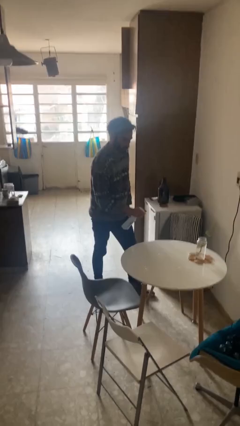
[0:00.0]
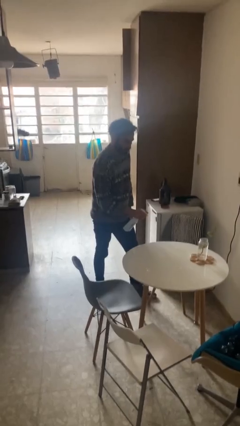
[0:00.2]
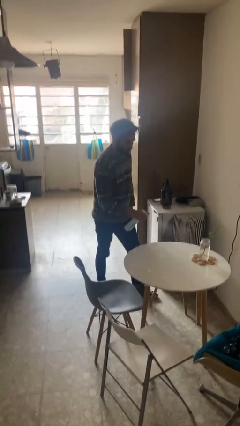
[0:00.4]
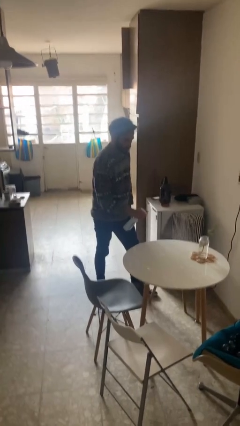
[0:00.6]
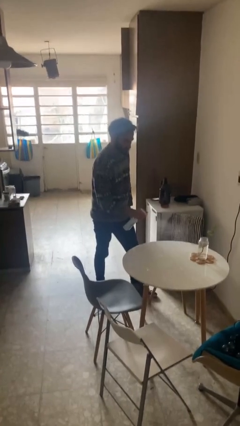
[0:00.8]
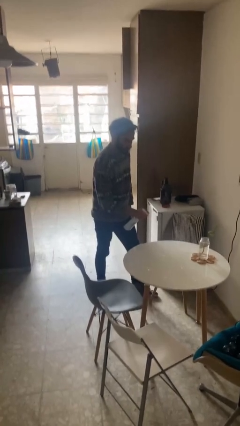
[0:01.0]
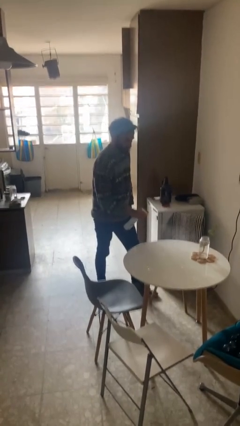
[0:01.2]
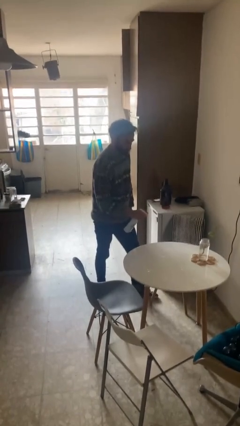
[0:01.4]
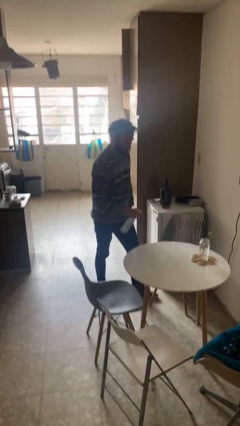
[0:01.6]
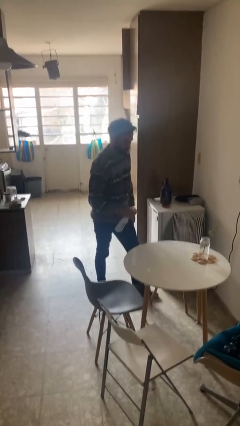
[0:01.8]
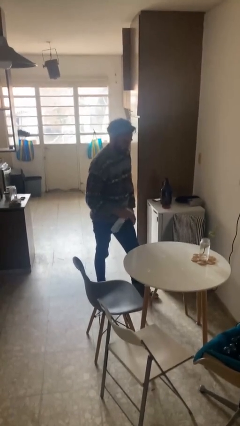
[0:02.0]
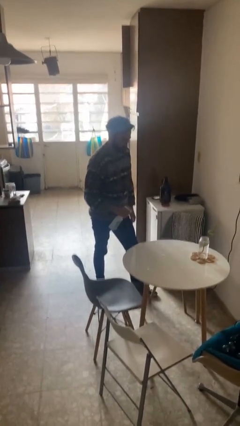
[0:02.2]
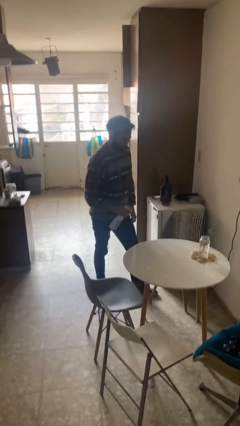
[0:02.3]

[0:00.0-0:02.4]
person sprays from bottle

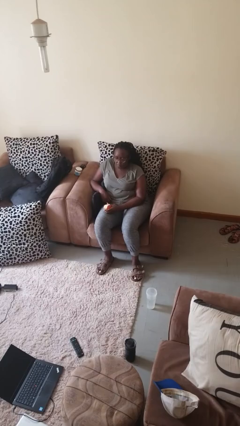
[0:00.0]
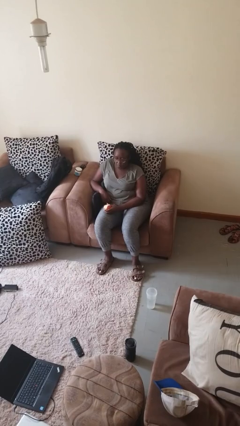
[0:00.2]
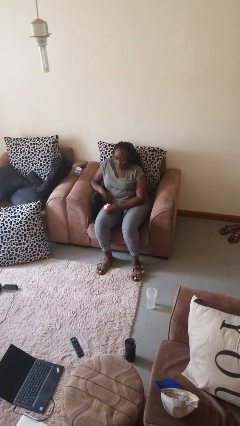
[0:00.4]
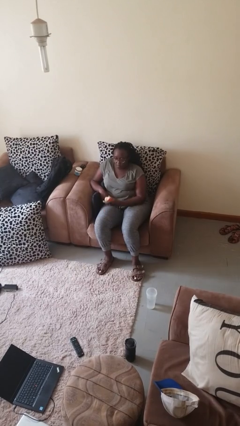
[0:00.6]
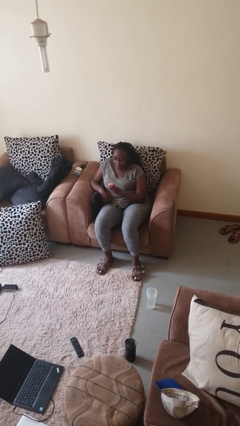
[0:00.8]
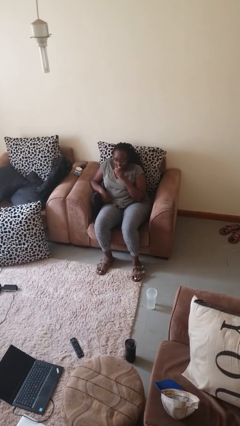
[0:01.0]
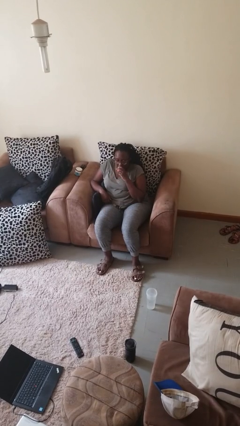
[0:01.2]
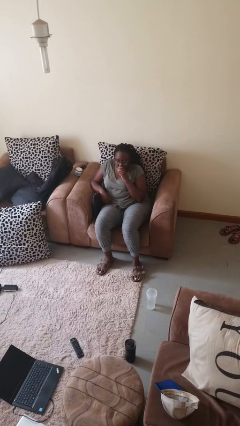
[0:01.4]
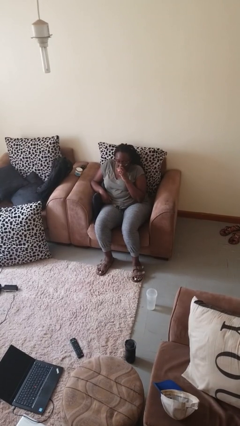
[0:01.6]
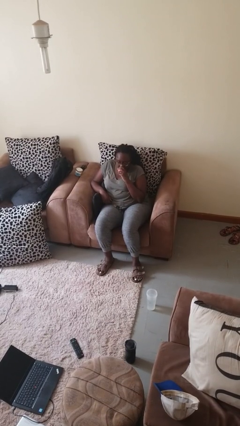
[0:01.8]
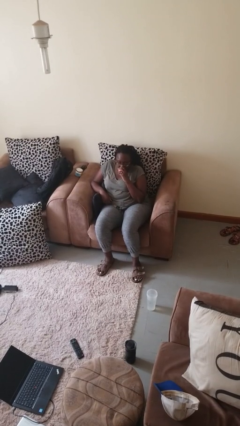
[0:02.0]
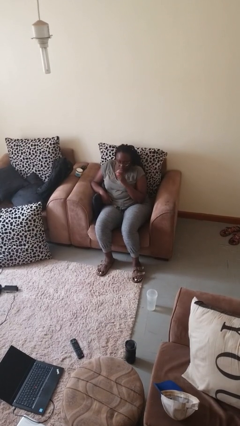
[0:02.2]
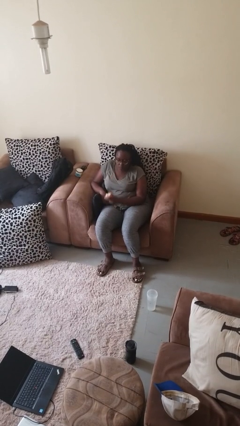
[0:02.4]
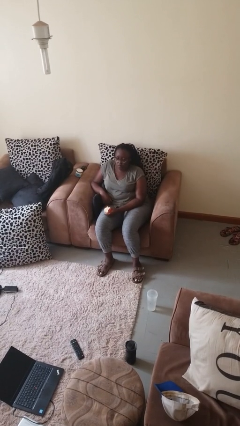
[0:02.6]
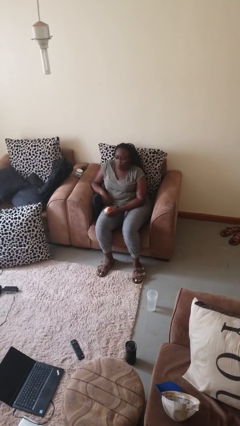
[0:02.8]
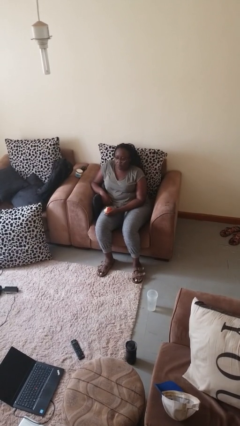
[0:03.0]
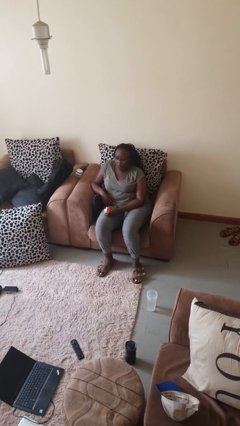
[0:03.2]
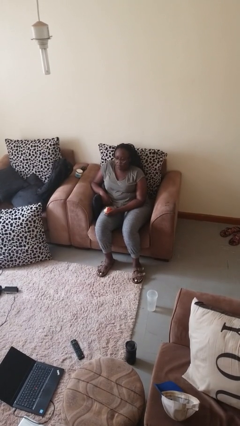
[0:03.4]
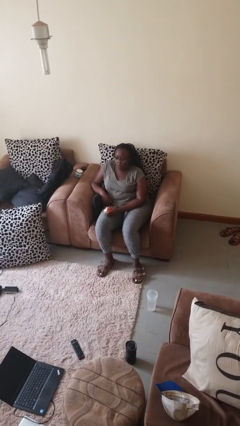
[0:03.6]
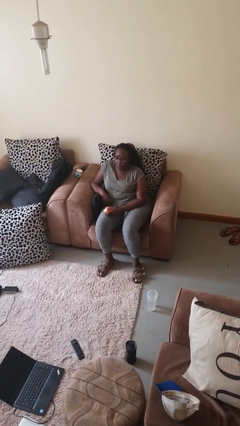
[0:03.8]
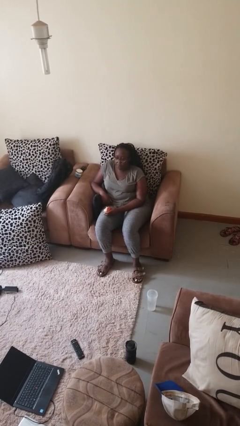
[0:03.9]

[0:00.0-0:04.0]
person eats apple

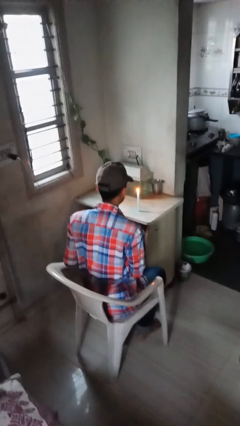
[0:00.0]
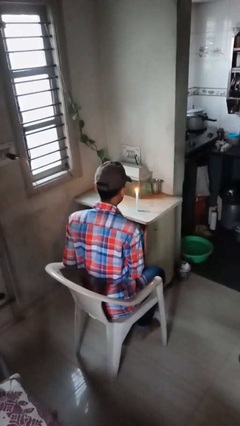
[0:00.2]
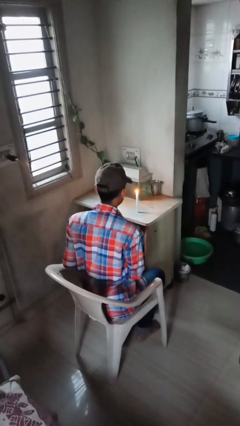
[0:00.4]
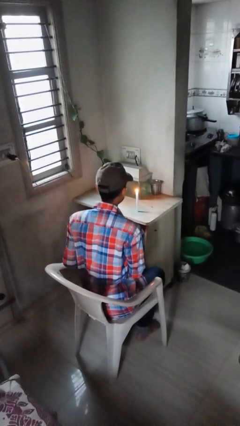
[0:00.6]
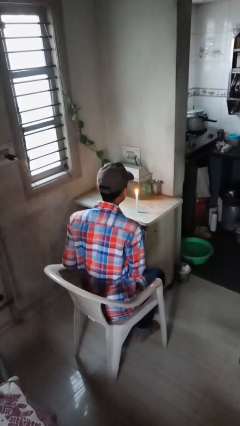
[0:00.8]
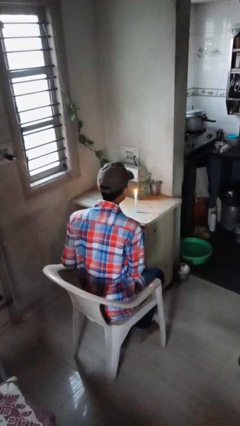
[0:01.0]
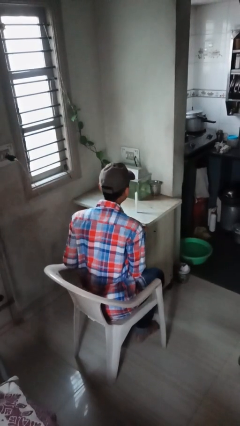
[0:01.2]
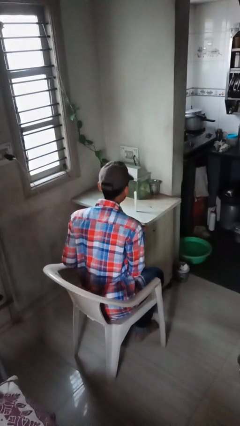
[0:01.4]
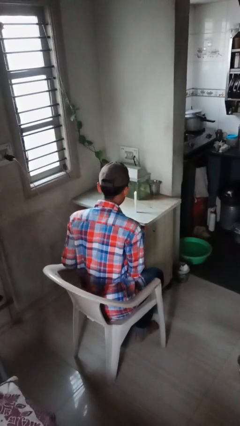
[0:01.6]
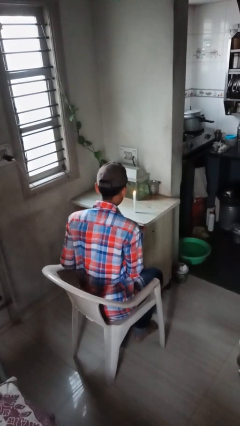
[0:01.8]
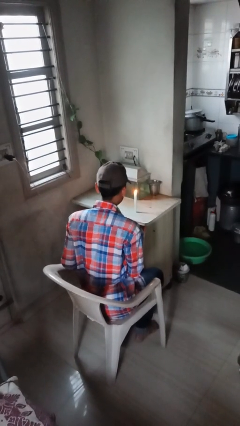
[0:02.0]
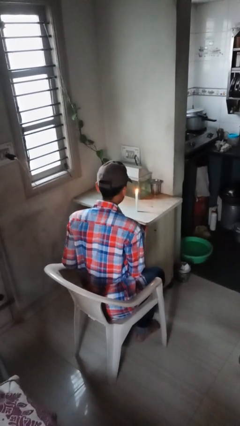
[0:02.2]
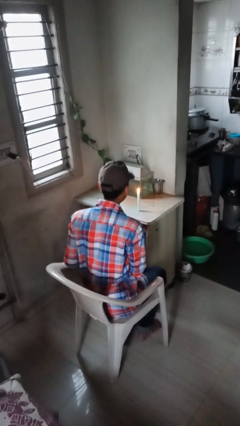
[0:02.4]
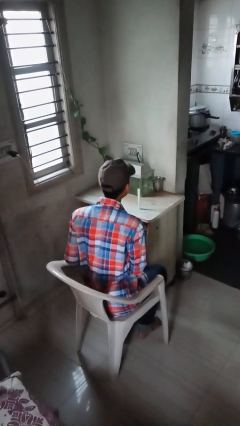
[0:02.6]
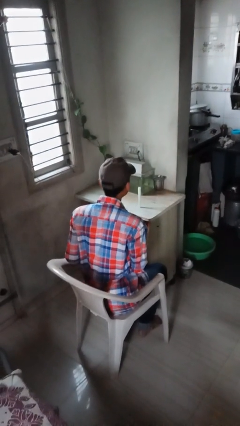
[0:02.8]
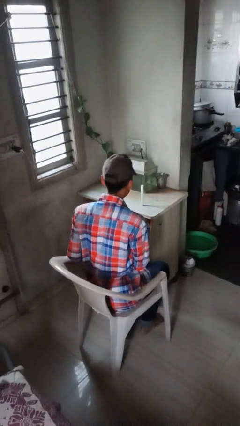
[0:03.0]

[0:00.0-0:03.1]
person extinguishes candle

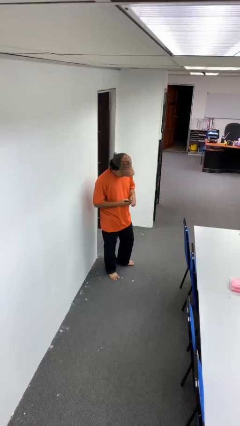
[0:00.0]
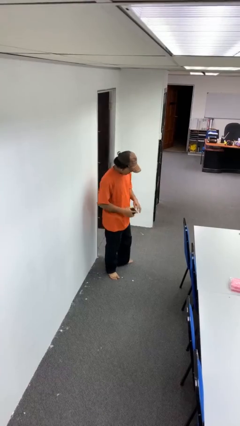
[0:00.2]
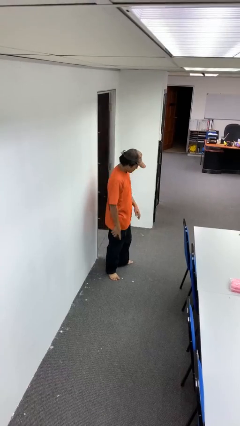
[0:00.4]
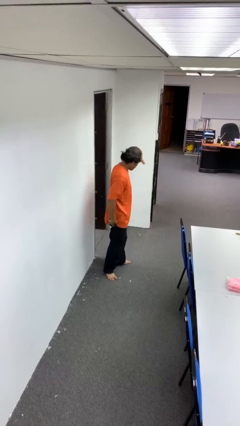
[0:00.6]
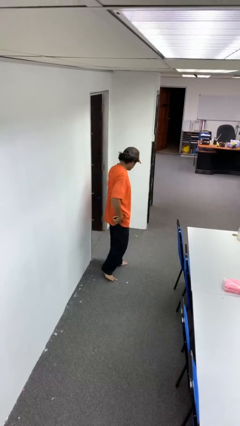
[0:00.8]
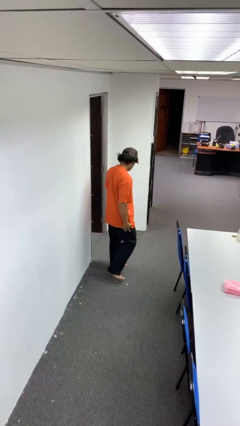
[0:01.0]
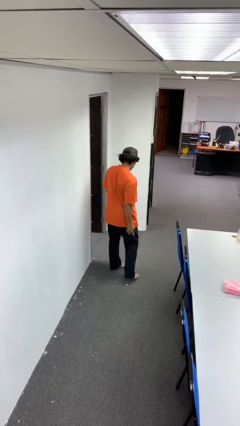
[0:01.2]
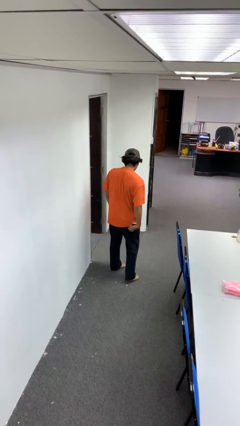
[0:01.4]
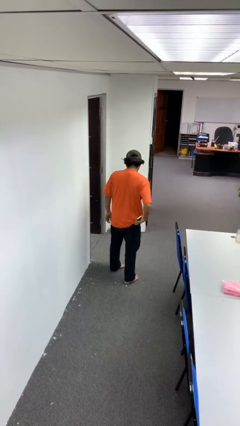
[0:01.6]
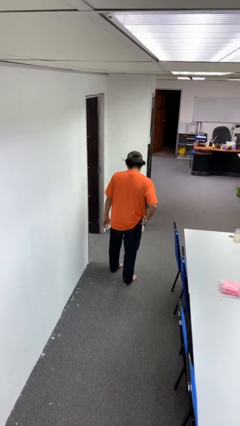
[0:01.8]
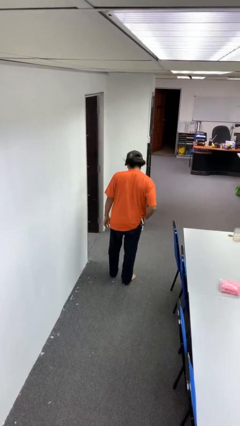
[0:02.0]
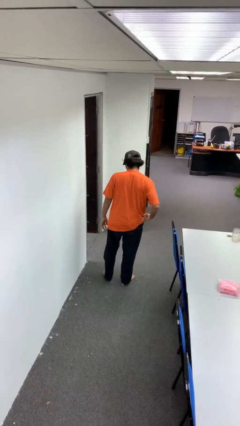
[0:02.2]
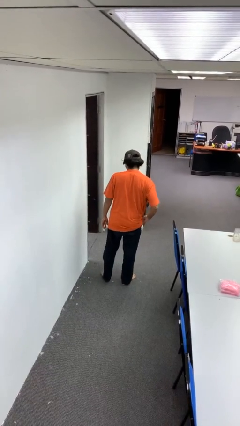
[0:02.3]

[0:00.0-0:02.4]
person puts phone into pocket

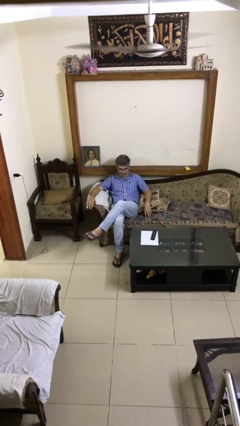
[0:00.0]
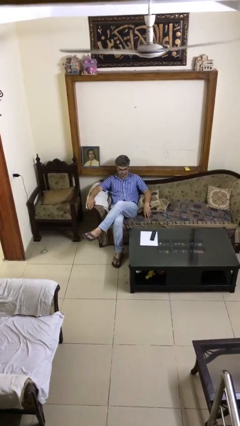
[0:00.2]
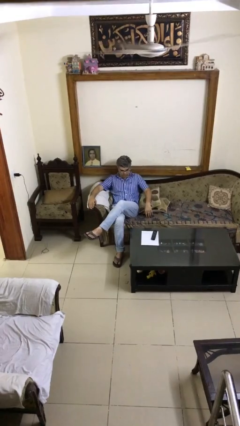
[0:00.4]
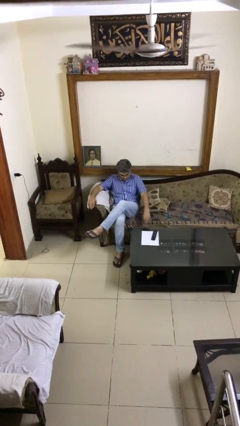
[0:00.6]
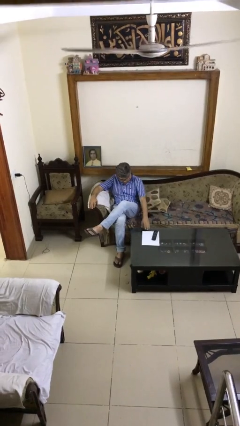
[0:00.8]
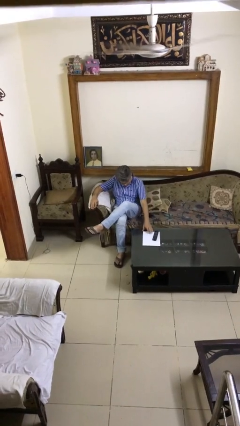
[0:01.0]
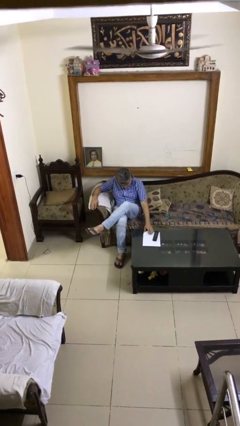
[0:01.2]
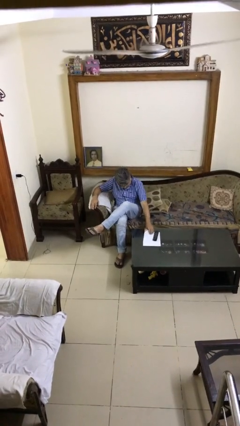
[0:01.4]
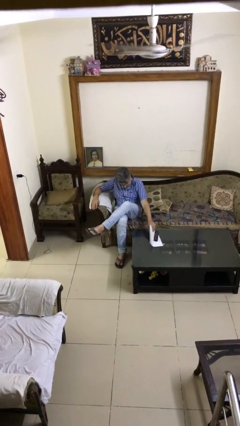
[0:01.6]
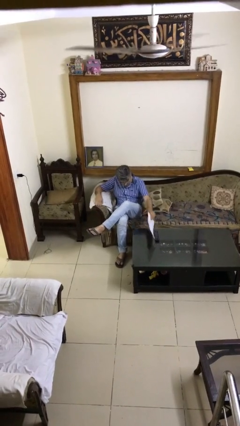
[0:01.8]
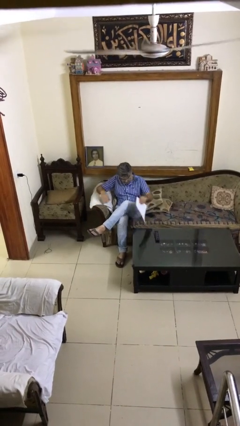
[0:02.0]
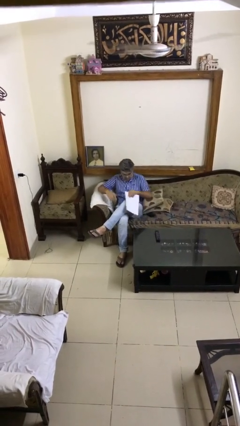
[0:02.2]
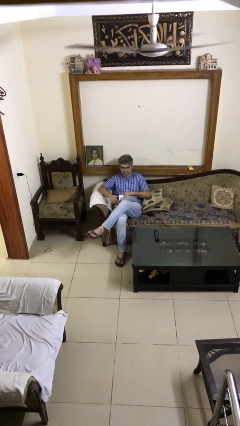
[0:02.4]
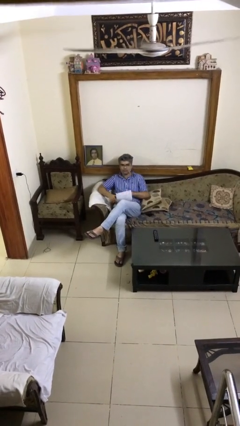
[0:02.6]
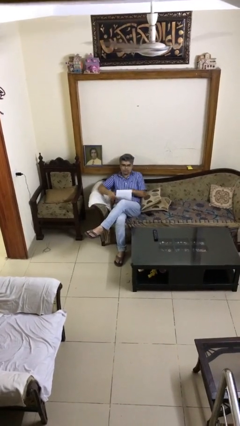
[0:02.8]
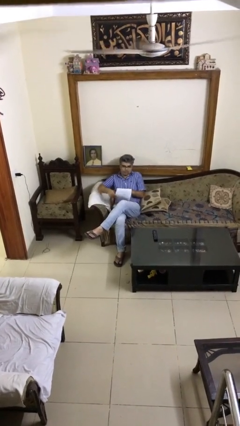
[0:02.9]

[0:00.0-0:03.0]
person picks up object from table

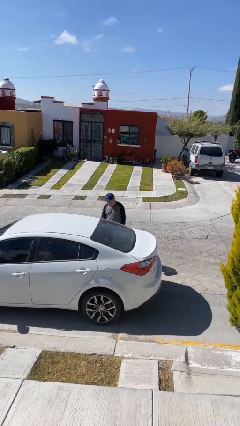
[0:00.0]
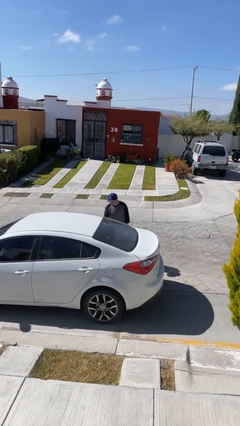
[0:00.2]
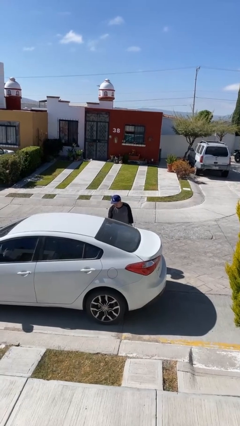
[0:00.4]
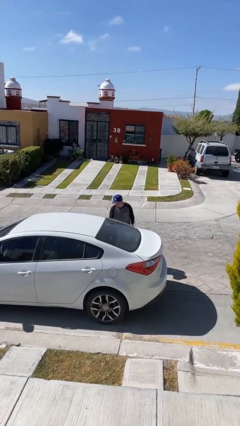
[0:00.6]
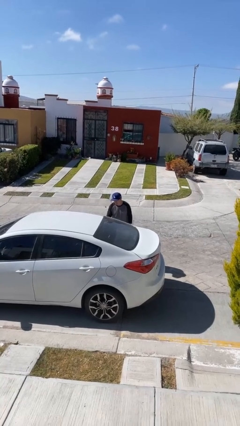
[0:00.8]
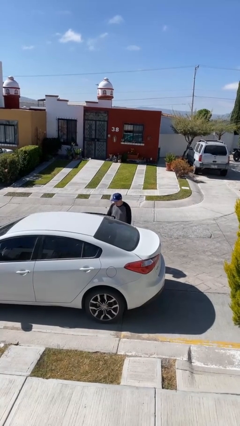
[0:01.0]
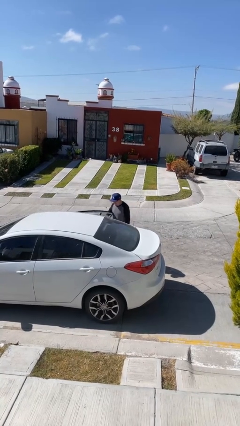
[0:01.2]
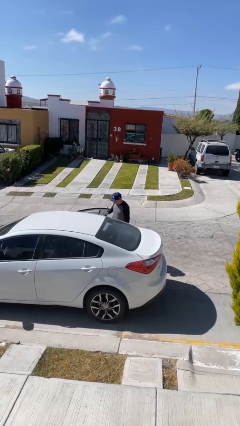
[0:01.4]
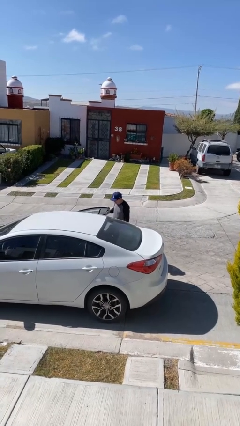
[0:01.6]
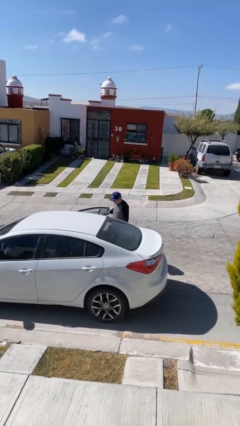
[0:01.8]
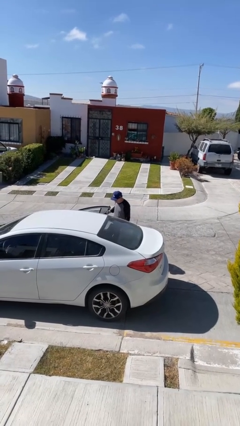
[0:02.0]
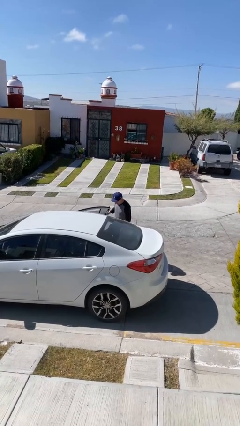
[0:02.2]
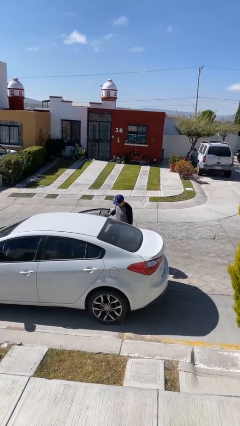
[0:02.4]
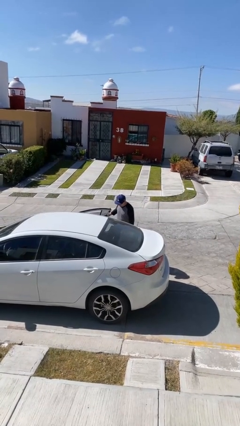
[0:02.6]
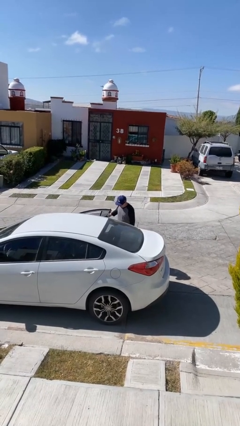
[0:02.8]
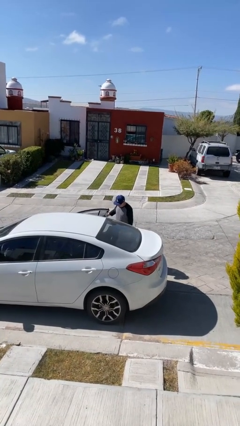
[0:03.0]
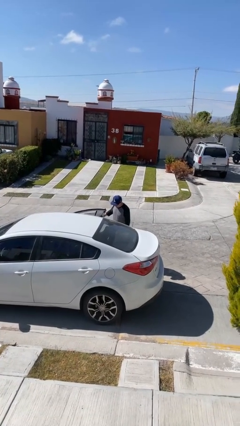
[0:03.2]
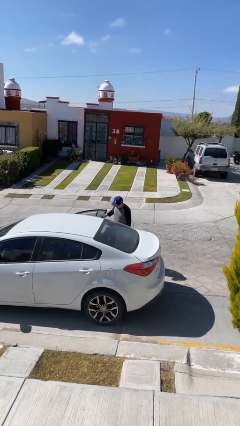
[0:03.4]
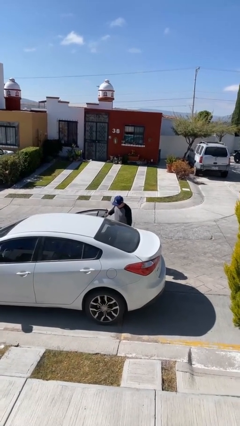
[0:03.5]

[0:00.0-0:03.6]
person opens car door
